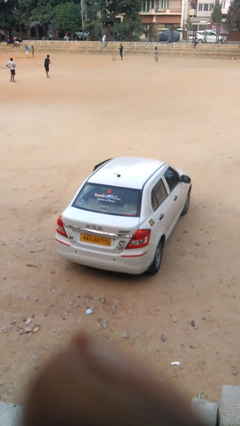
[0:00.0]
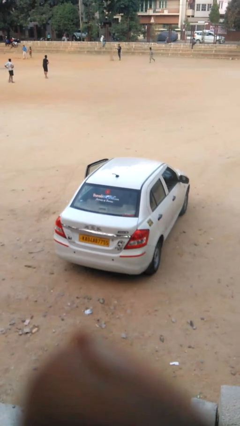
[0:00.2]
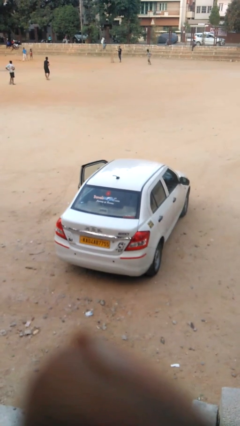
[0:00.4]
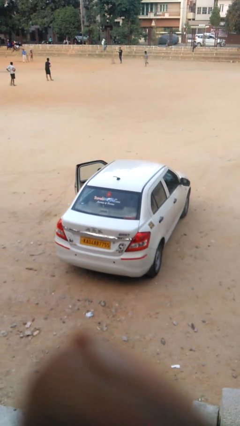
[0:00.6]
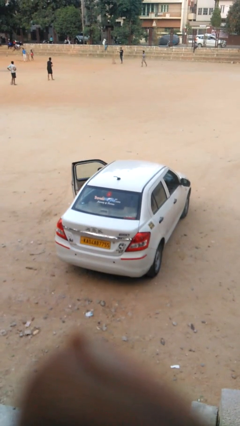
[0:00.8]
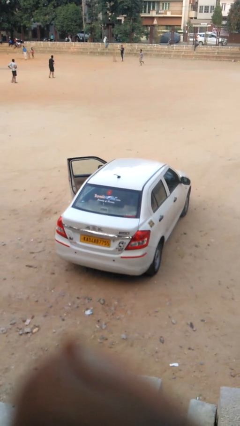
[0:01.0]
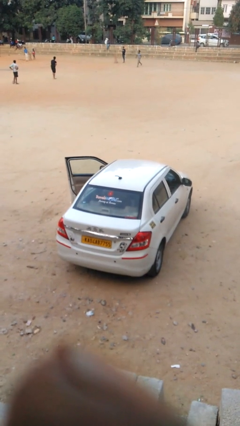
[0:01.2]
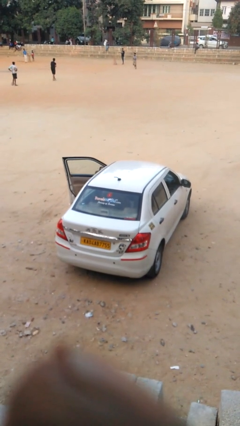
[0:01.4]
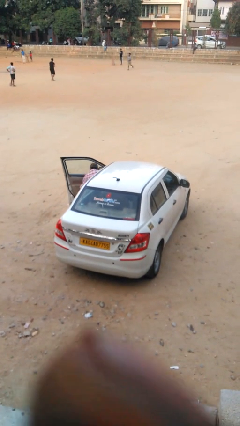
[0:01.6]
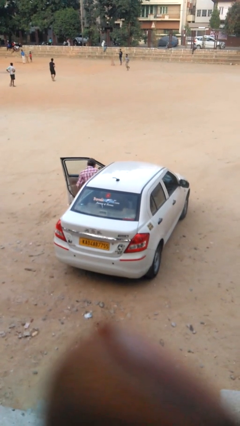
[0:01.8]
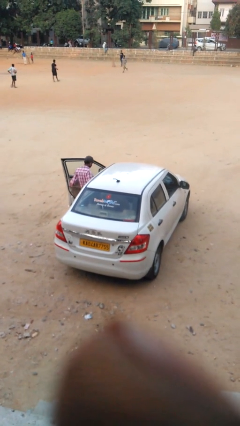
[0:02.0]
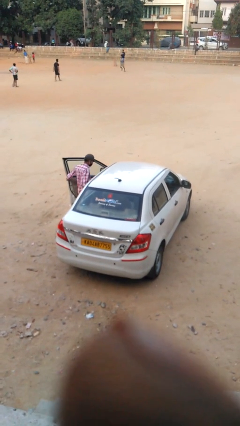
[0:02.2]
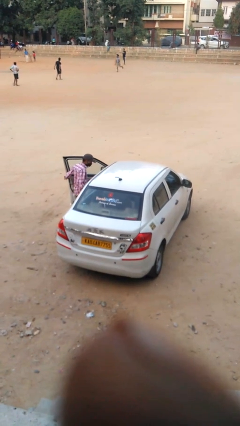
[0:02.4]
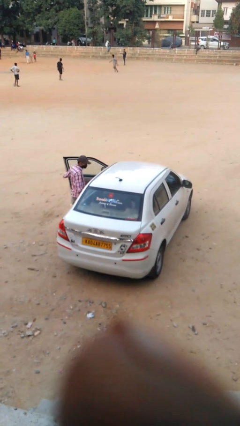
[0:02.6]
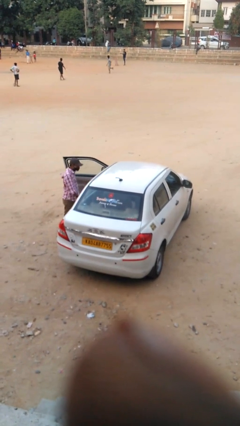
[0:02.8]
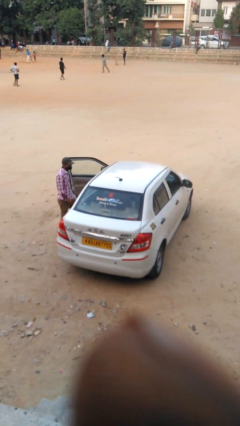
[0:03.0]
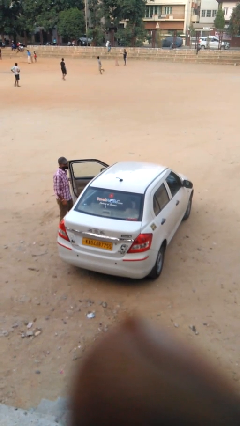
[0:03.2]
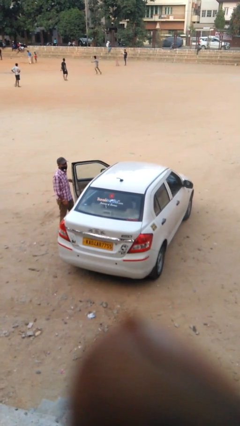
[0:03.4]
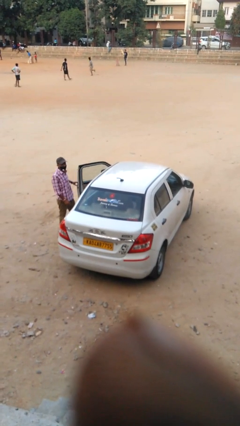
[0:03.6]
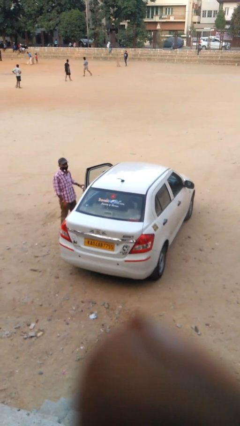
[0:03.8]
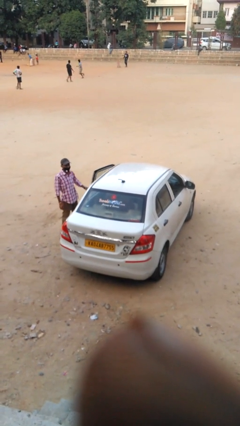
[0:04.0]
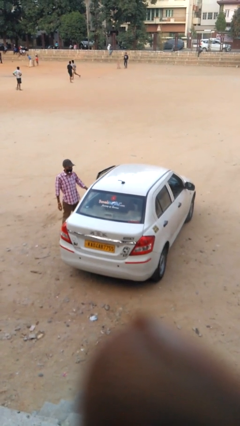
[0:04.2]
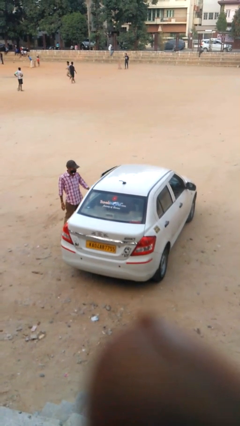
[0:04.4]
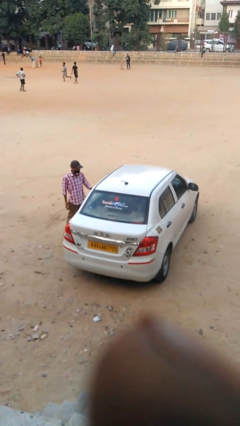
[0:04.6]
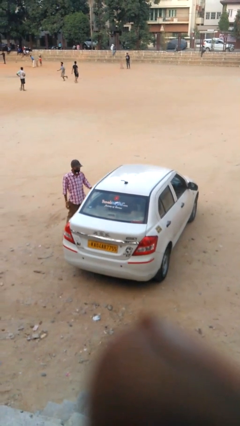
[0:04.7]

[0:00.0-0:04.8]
car drops off person

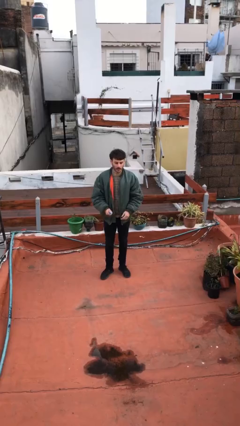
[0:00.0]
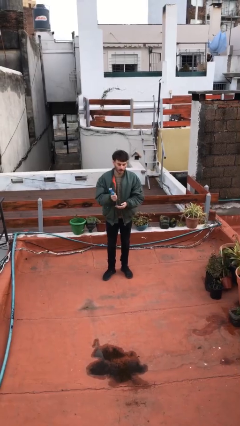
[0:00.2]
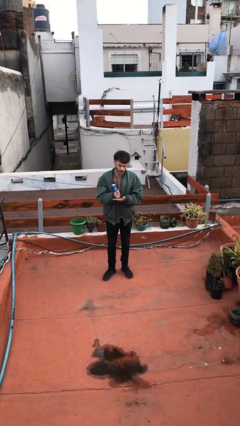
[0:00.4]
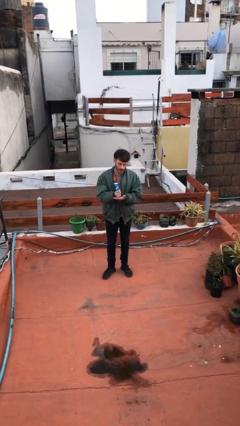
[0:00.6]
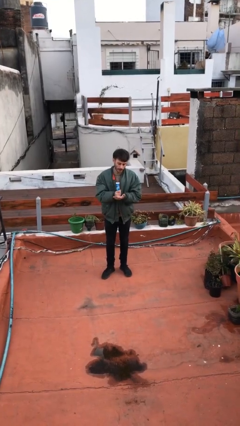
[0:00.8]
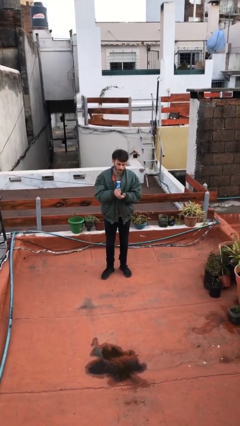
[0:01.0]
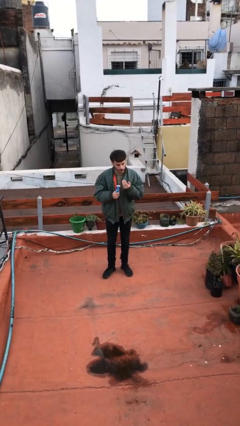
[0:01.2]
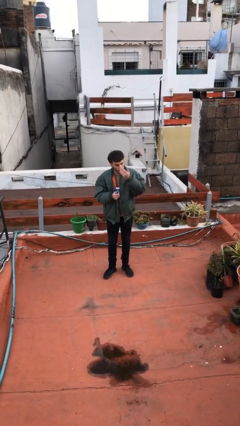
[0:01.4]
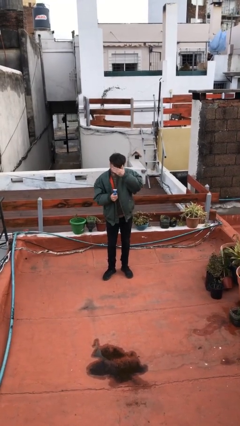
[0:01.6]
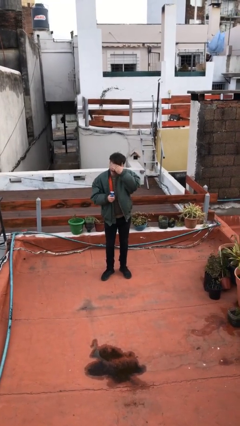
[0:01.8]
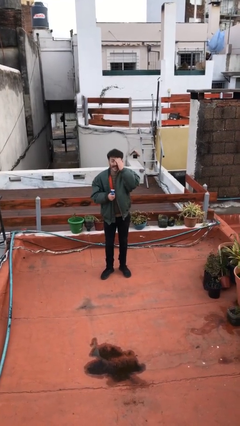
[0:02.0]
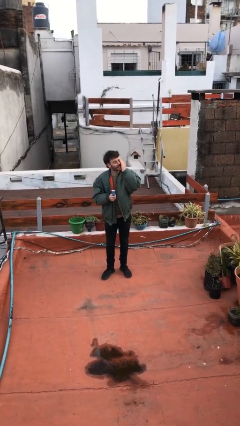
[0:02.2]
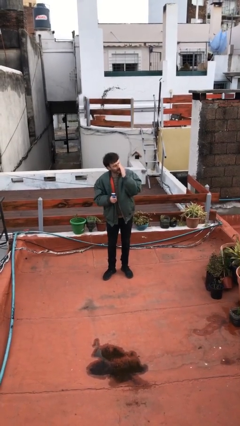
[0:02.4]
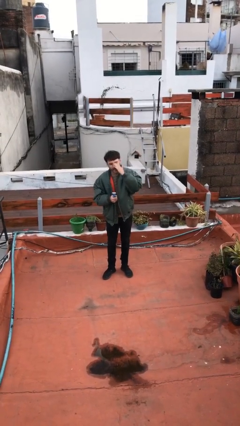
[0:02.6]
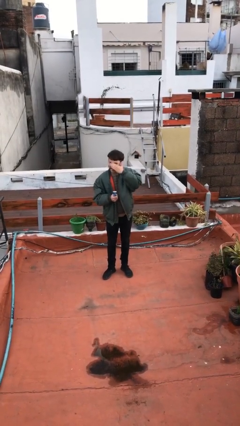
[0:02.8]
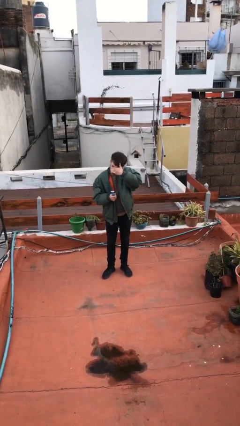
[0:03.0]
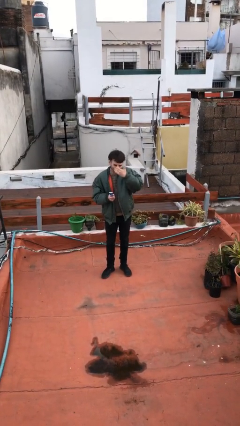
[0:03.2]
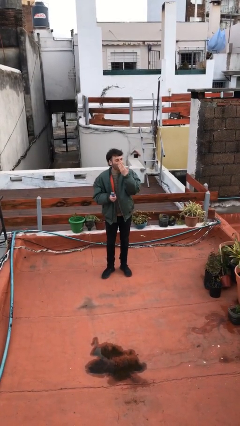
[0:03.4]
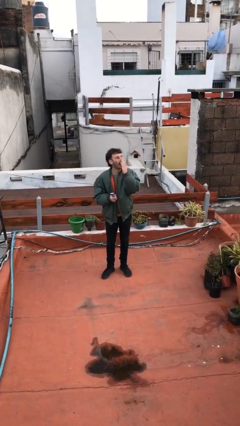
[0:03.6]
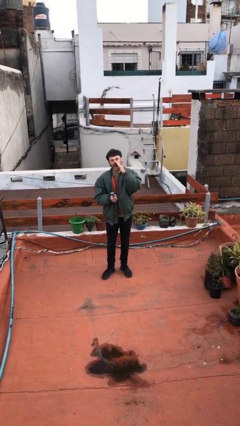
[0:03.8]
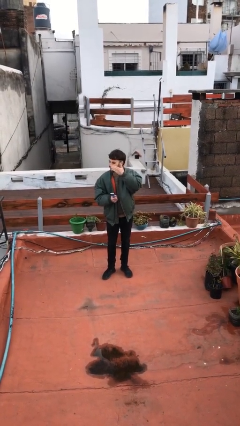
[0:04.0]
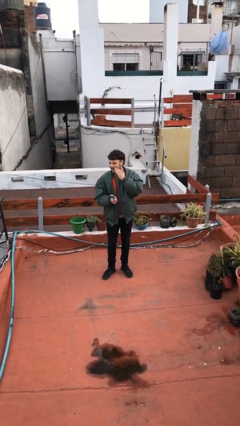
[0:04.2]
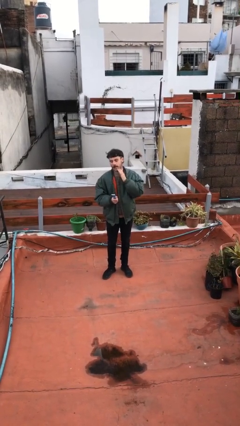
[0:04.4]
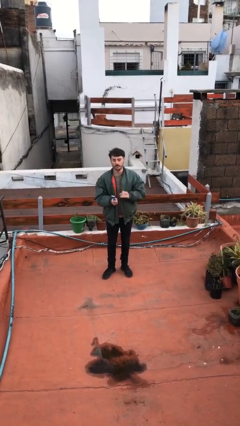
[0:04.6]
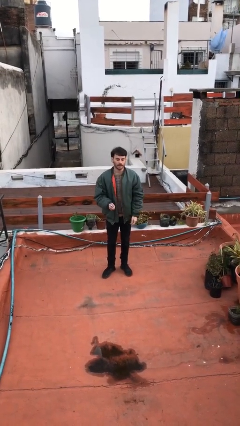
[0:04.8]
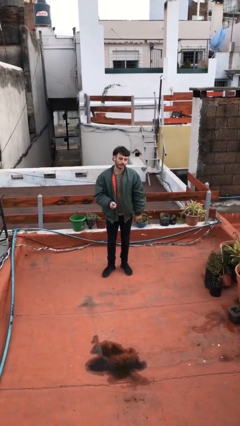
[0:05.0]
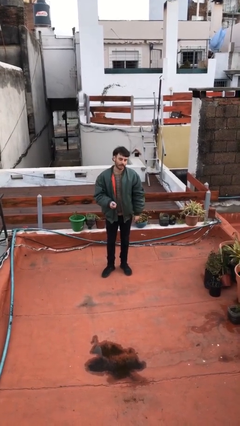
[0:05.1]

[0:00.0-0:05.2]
person applies facial moisturizer

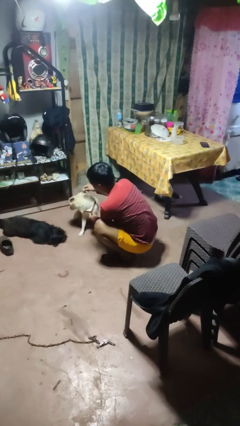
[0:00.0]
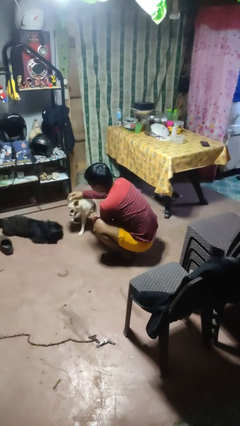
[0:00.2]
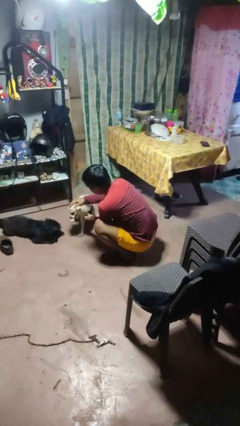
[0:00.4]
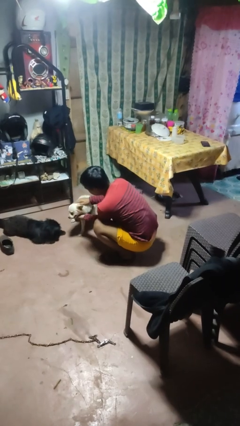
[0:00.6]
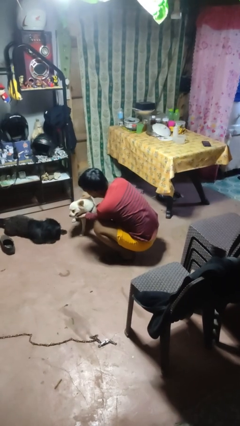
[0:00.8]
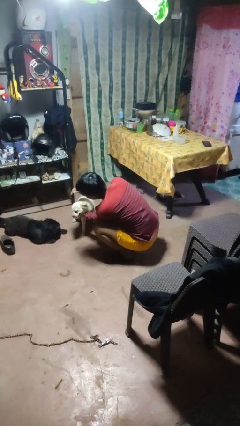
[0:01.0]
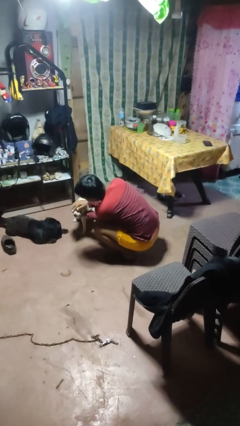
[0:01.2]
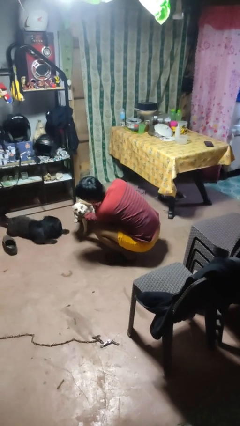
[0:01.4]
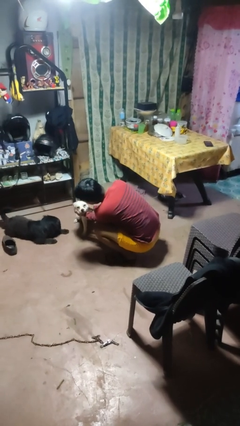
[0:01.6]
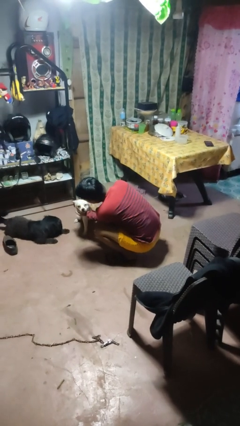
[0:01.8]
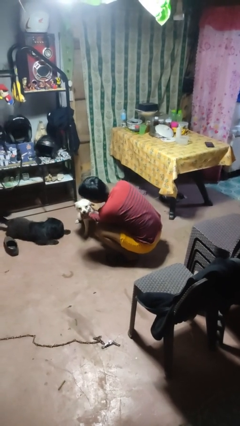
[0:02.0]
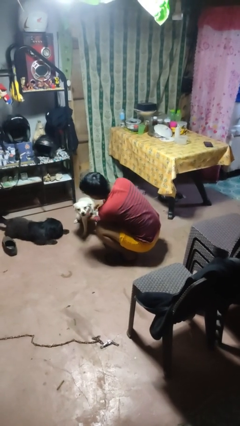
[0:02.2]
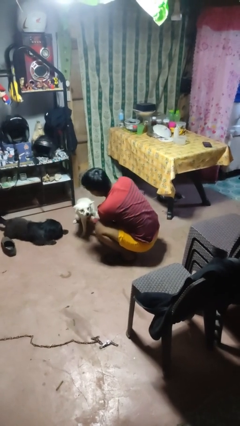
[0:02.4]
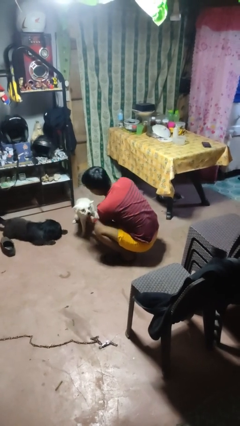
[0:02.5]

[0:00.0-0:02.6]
person pets dog

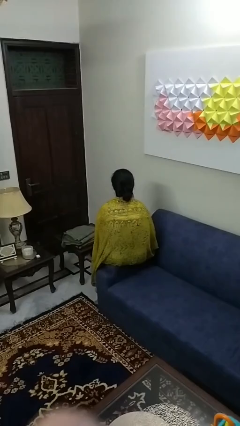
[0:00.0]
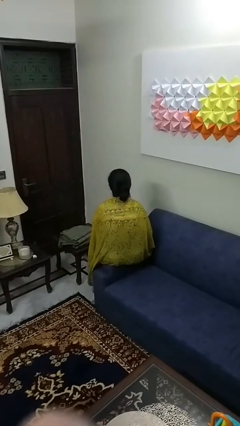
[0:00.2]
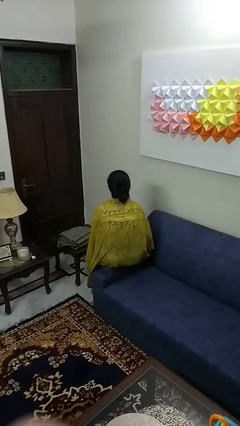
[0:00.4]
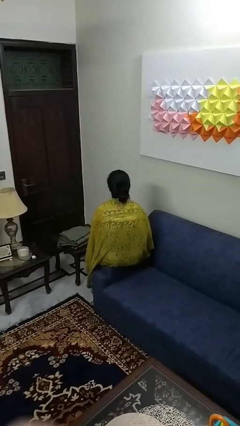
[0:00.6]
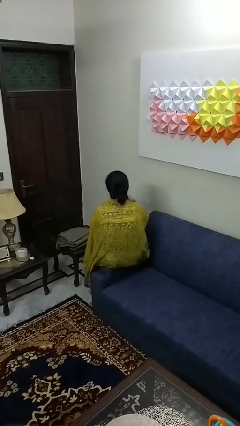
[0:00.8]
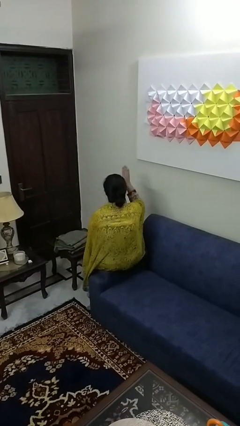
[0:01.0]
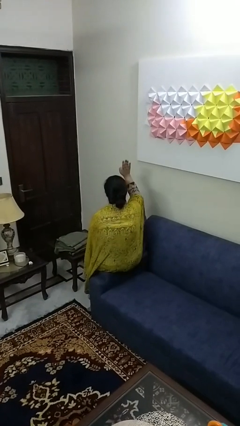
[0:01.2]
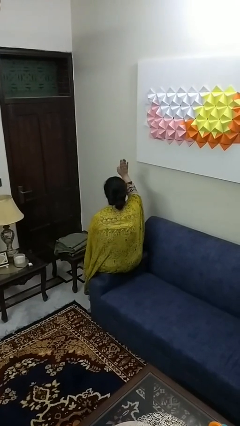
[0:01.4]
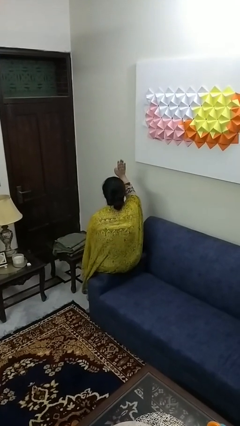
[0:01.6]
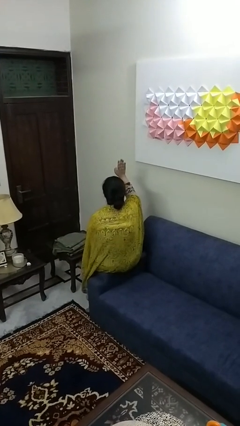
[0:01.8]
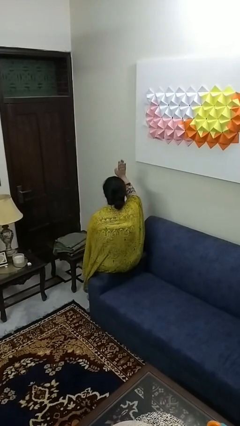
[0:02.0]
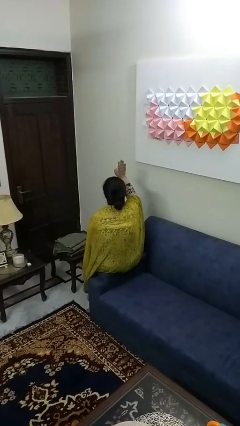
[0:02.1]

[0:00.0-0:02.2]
person gestures raise hand

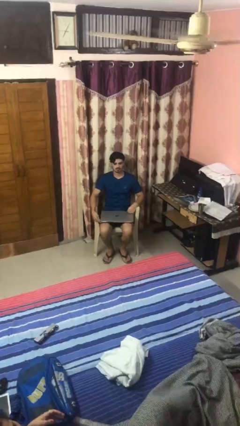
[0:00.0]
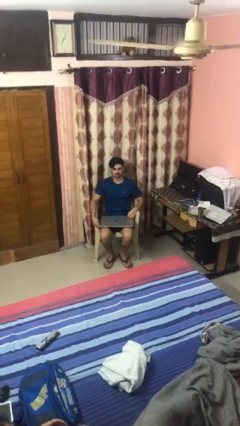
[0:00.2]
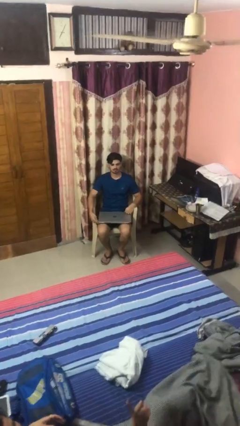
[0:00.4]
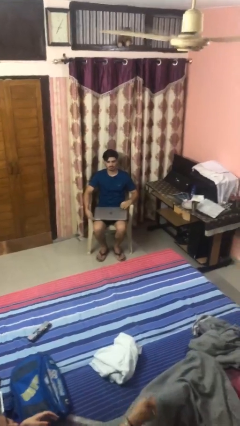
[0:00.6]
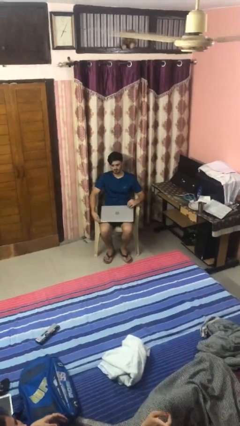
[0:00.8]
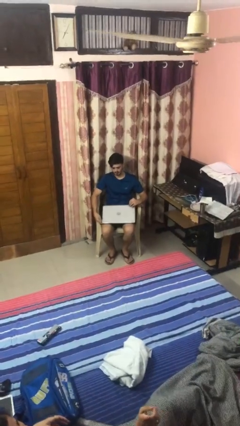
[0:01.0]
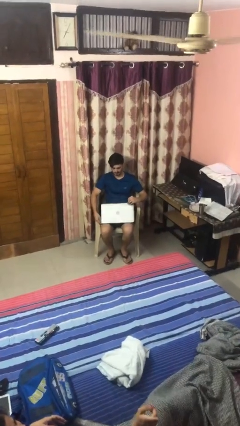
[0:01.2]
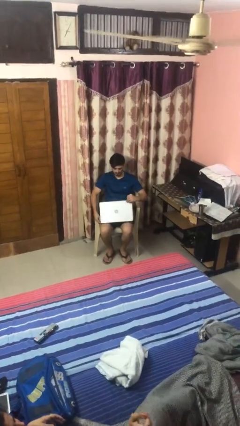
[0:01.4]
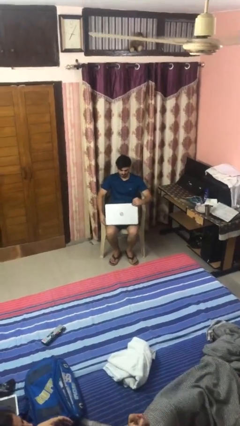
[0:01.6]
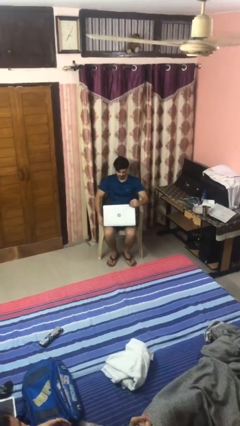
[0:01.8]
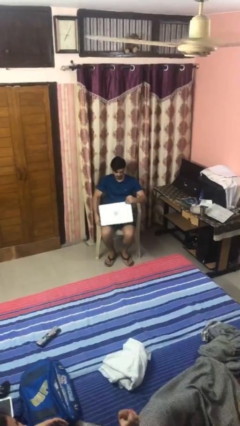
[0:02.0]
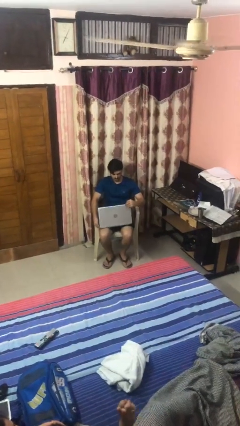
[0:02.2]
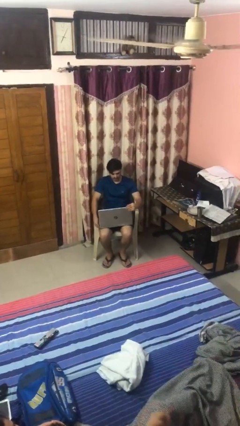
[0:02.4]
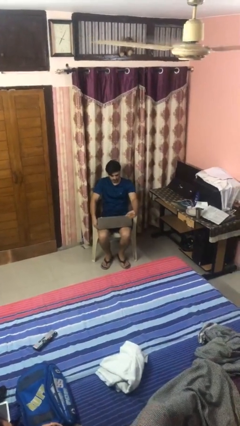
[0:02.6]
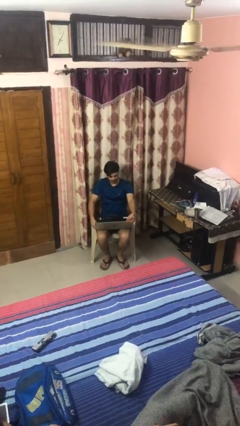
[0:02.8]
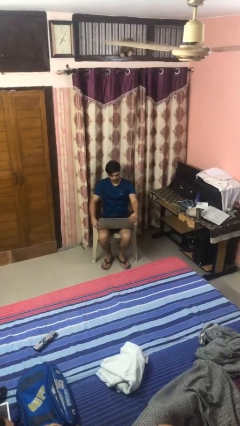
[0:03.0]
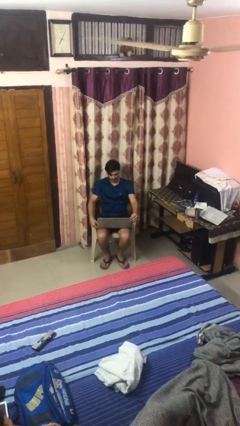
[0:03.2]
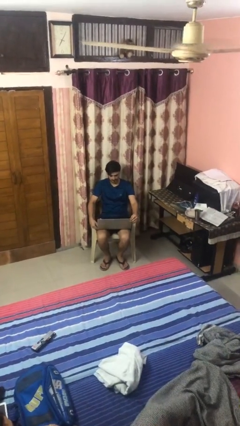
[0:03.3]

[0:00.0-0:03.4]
person opens laptop
